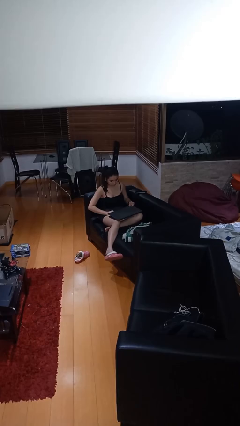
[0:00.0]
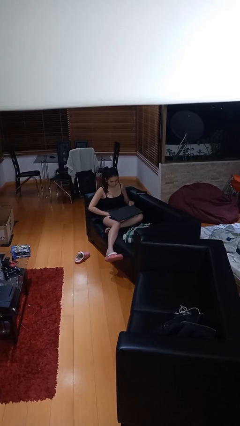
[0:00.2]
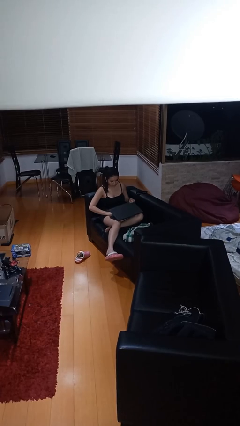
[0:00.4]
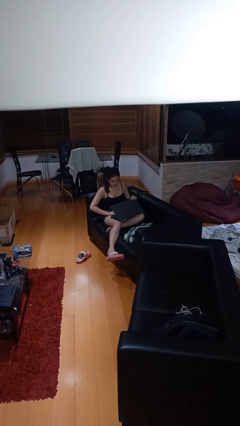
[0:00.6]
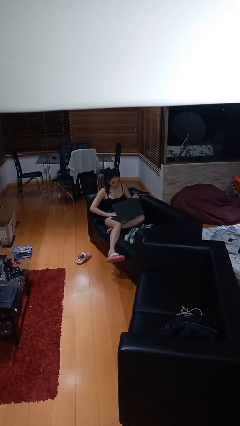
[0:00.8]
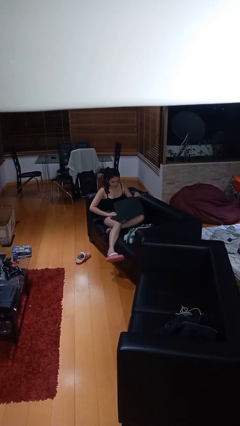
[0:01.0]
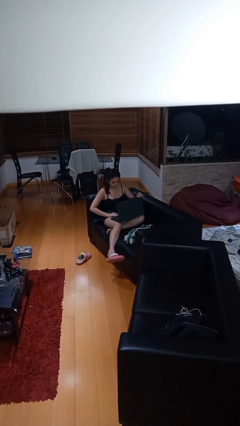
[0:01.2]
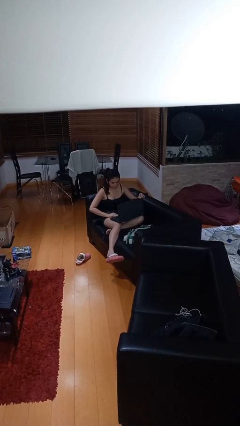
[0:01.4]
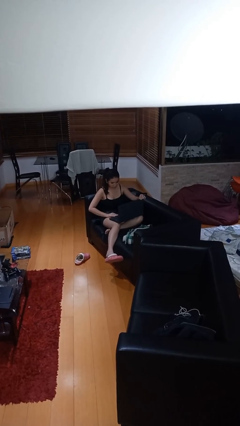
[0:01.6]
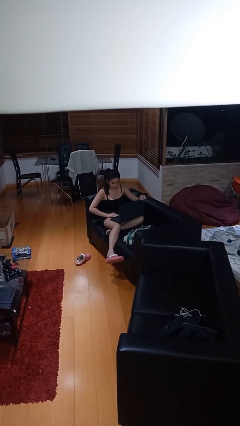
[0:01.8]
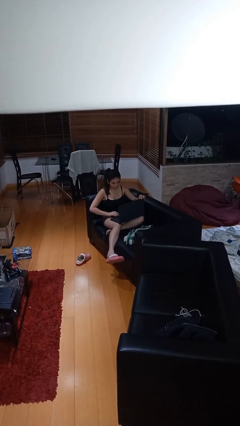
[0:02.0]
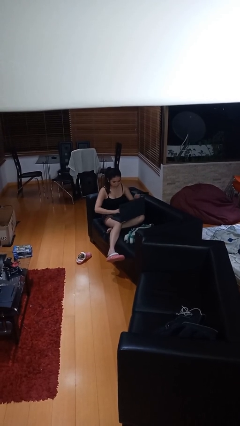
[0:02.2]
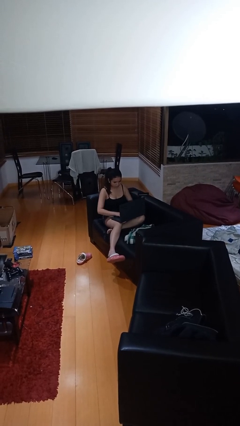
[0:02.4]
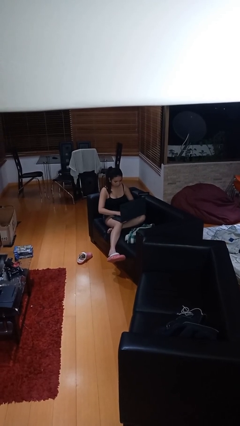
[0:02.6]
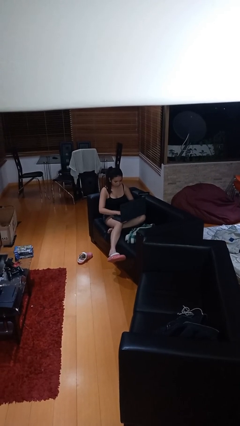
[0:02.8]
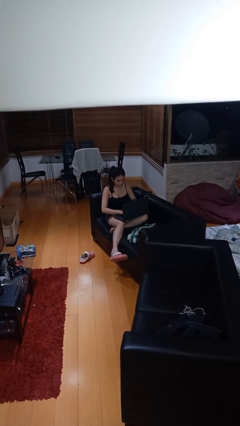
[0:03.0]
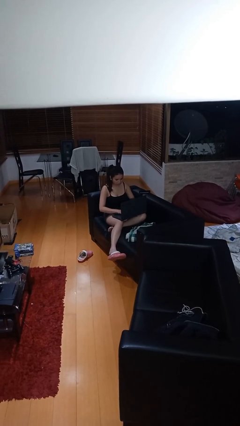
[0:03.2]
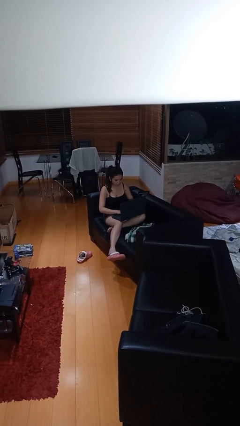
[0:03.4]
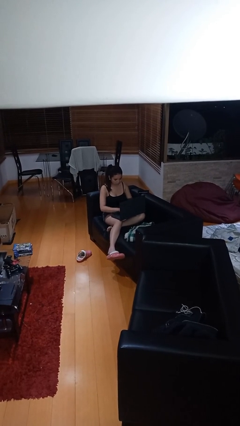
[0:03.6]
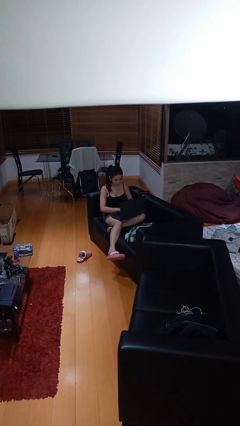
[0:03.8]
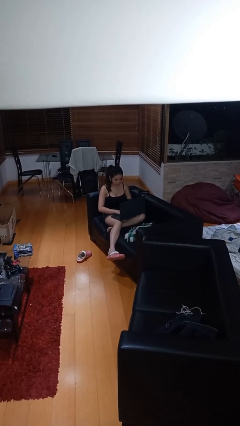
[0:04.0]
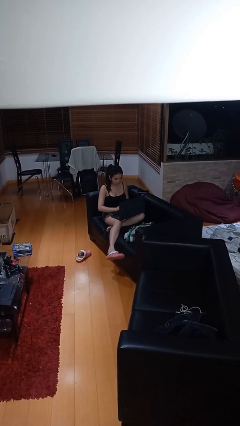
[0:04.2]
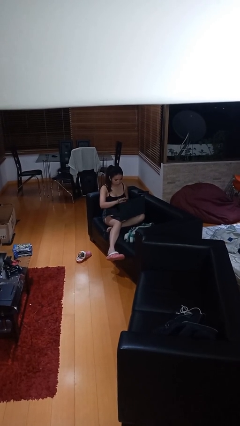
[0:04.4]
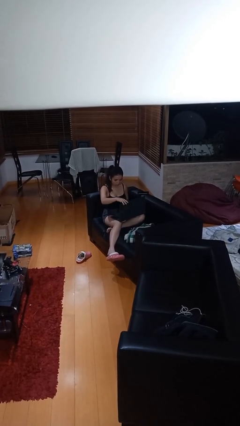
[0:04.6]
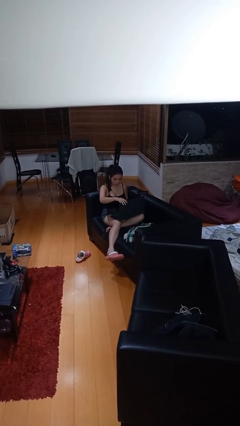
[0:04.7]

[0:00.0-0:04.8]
person interacts with laptop

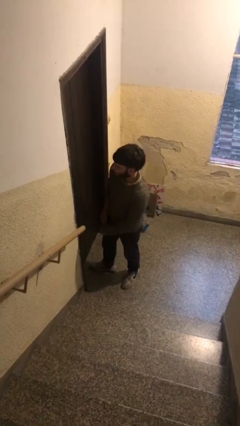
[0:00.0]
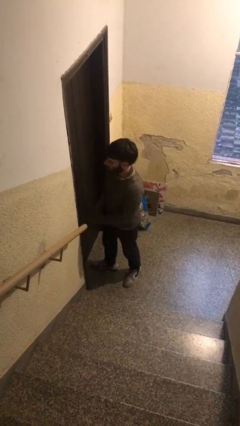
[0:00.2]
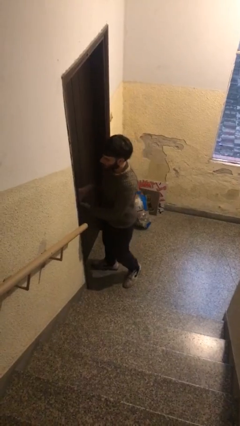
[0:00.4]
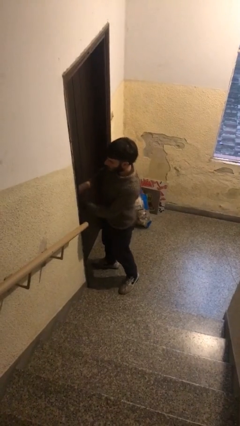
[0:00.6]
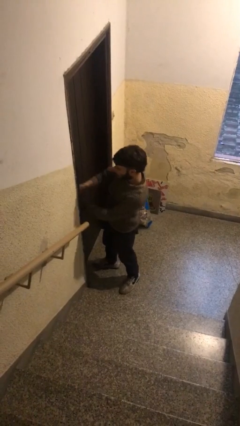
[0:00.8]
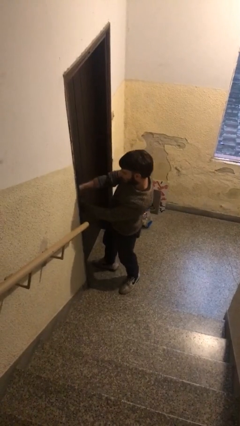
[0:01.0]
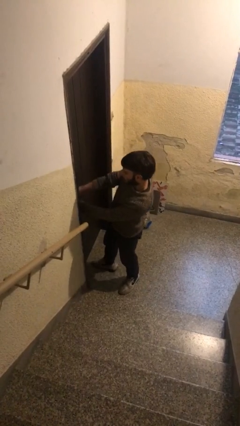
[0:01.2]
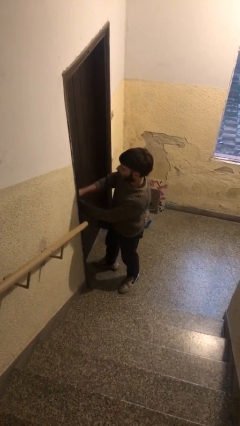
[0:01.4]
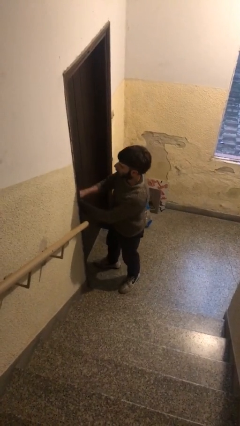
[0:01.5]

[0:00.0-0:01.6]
person unlocks door with keys

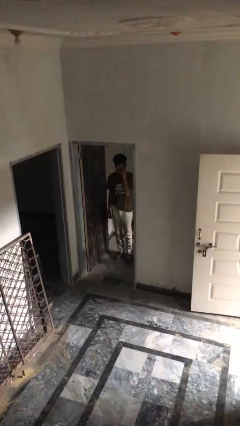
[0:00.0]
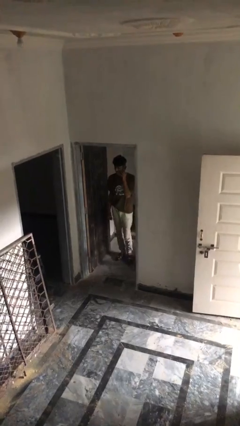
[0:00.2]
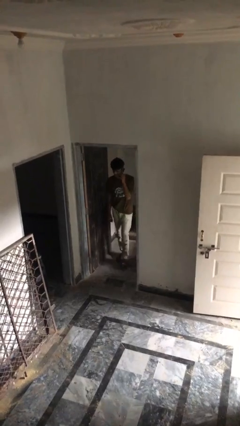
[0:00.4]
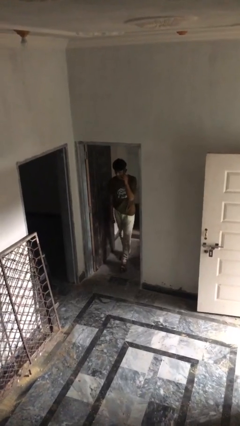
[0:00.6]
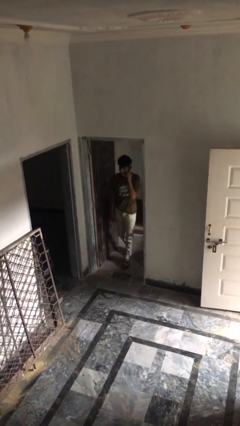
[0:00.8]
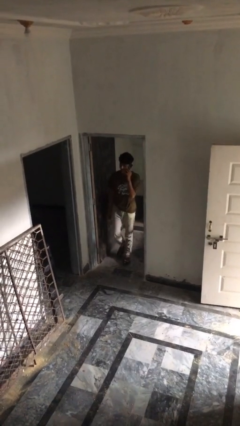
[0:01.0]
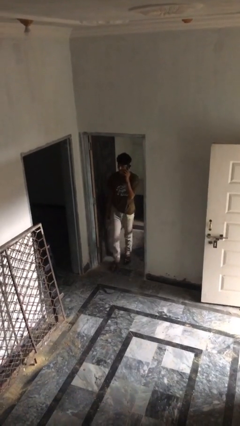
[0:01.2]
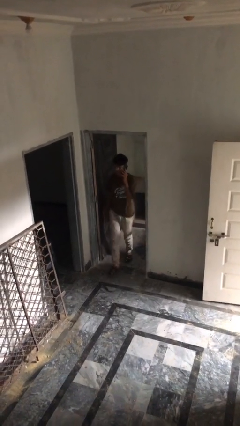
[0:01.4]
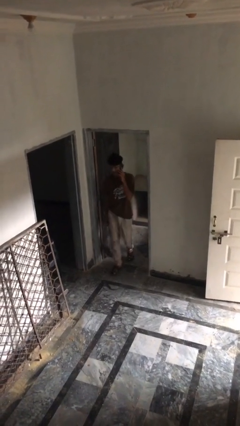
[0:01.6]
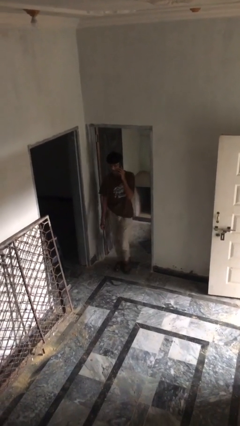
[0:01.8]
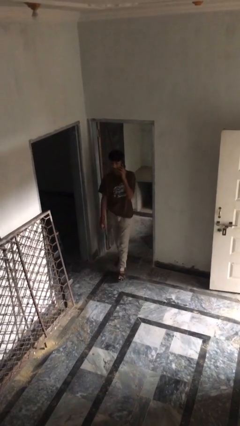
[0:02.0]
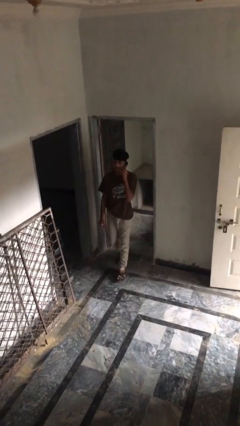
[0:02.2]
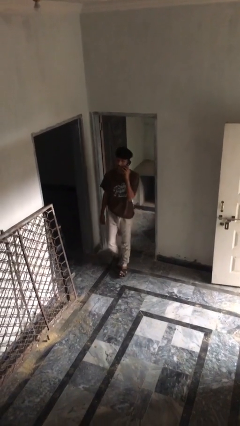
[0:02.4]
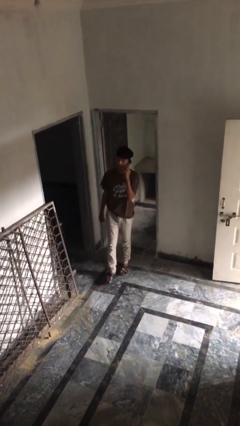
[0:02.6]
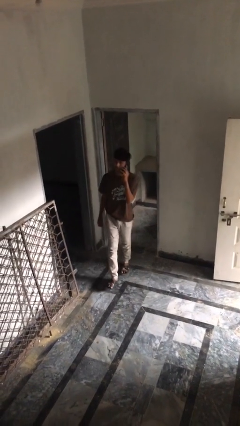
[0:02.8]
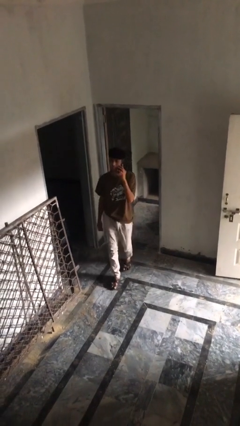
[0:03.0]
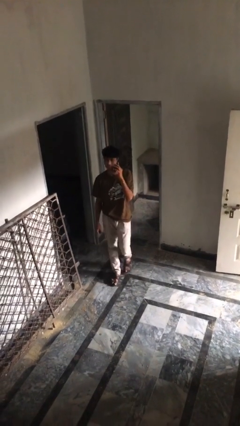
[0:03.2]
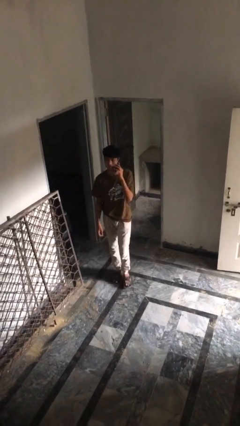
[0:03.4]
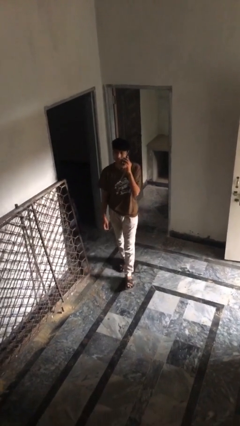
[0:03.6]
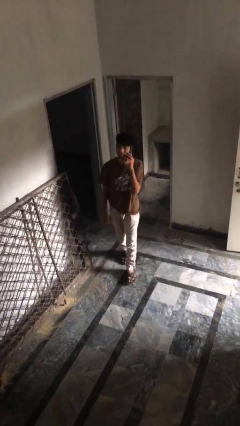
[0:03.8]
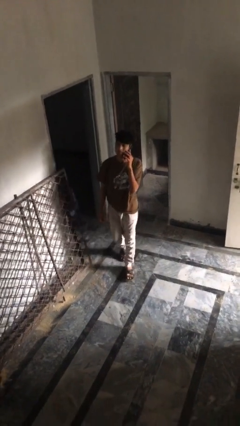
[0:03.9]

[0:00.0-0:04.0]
person enters scene through structure

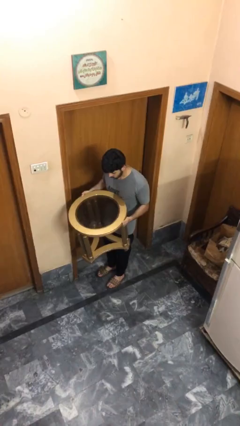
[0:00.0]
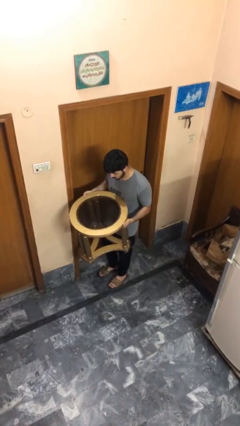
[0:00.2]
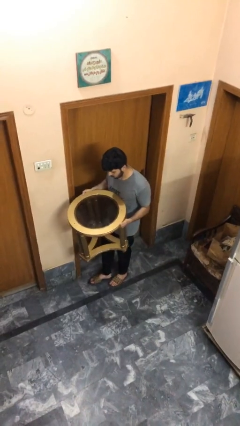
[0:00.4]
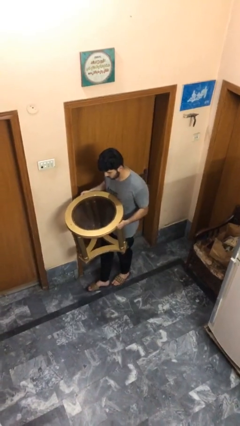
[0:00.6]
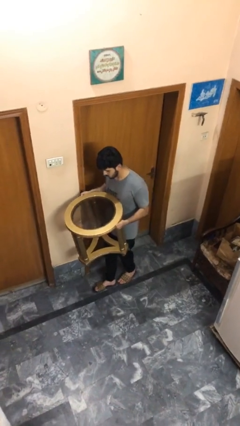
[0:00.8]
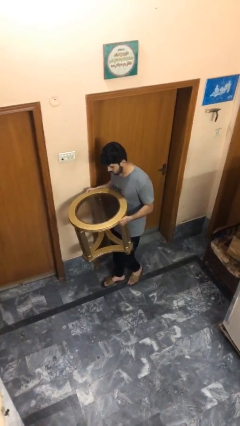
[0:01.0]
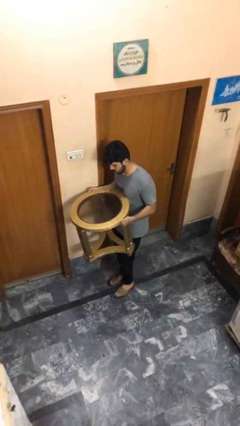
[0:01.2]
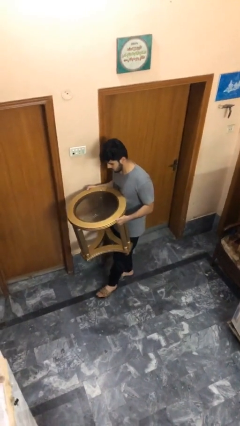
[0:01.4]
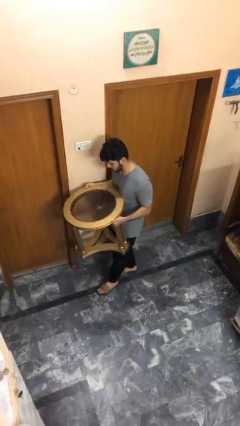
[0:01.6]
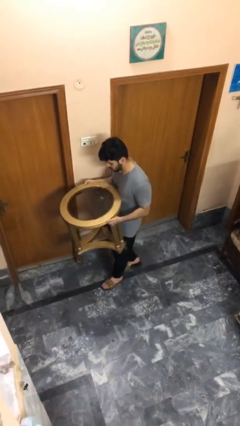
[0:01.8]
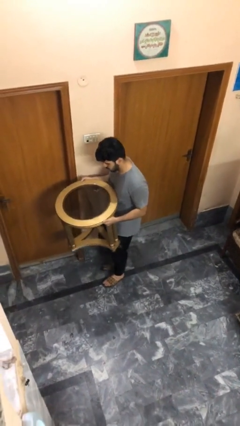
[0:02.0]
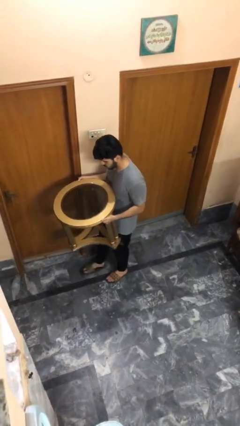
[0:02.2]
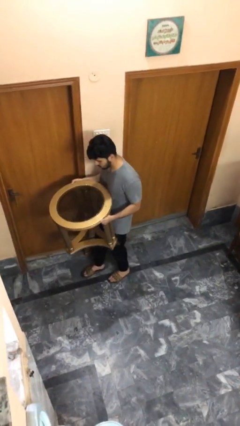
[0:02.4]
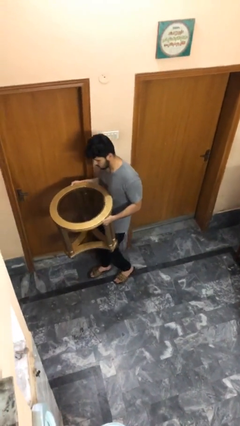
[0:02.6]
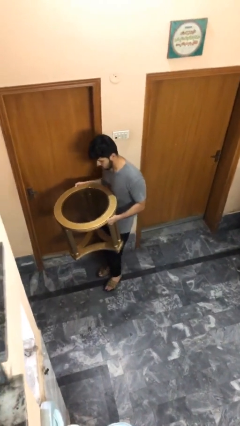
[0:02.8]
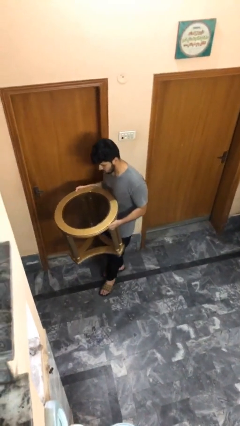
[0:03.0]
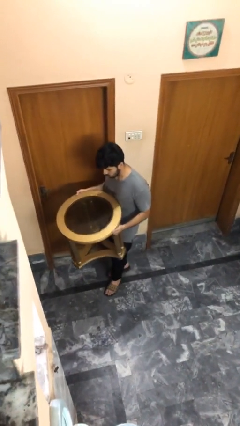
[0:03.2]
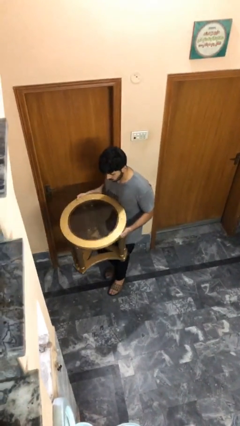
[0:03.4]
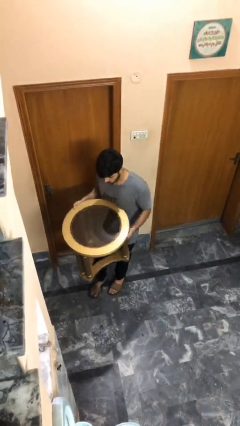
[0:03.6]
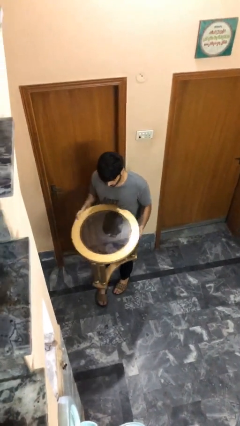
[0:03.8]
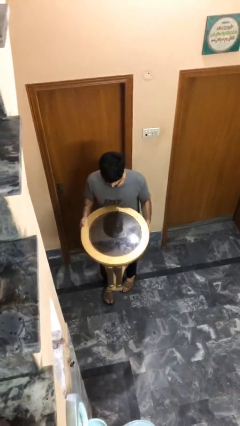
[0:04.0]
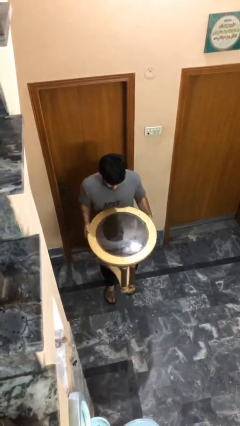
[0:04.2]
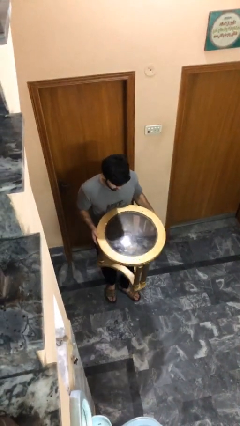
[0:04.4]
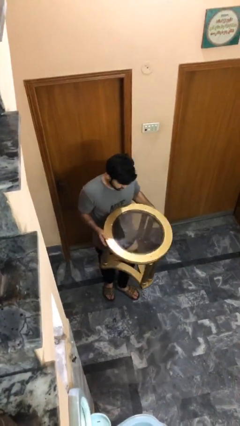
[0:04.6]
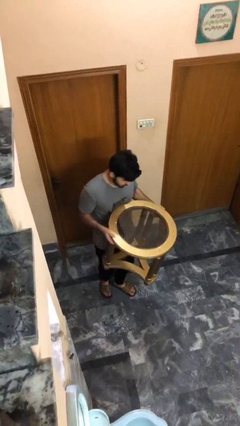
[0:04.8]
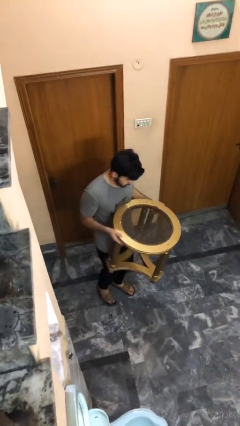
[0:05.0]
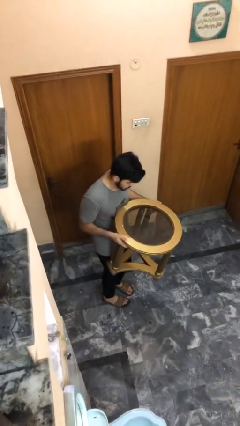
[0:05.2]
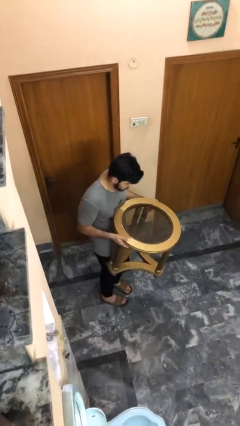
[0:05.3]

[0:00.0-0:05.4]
person carries furniture

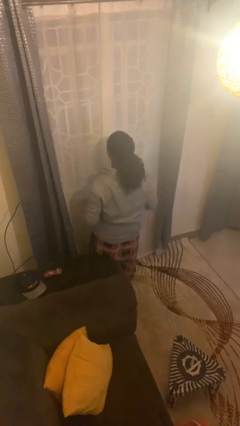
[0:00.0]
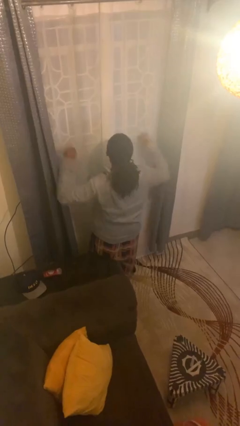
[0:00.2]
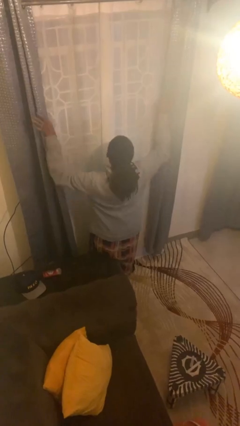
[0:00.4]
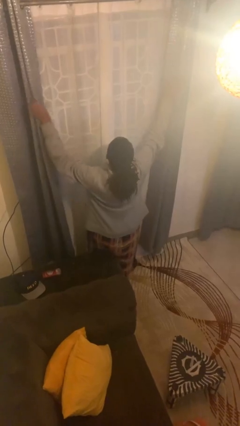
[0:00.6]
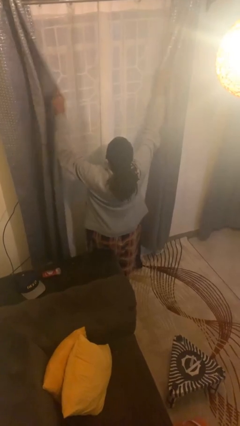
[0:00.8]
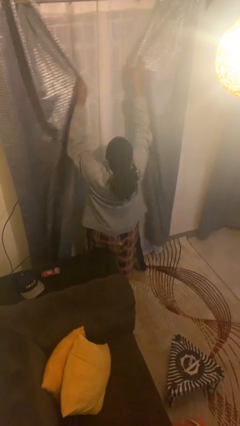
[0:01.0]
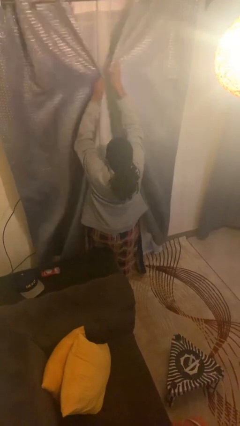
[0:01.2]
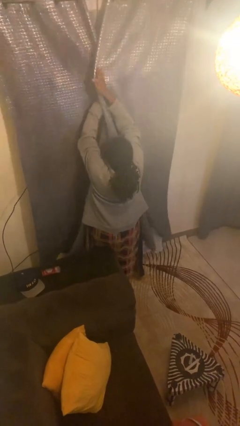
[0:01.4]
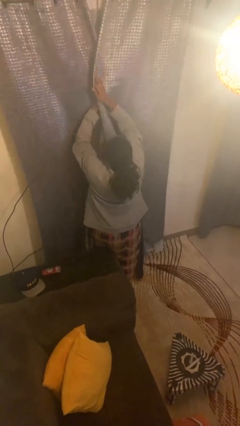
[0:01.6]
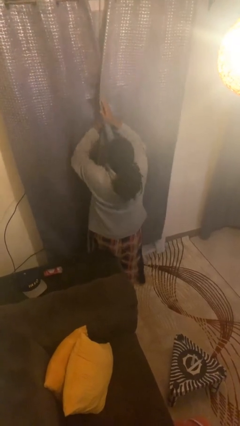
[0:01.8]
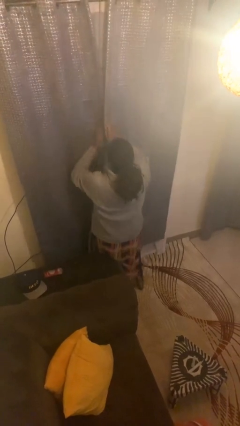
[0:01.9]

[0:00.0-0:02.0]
person closes curtains
